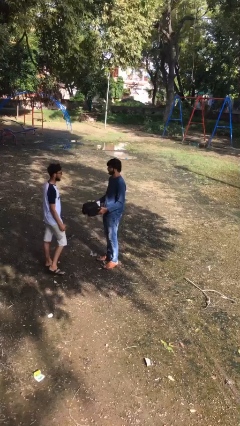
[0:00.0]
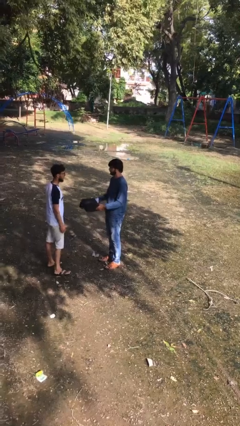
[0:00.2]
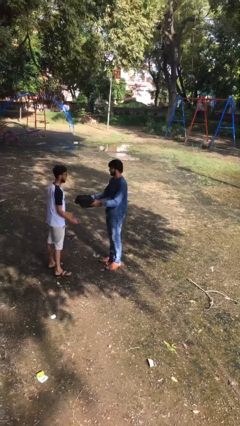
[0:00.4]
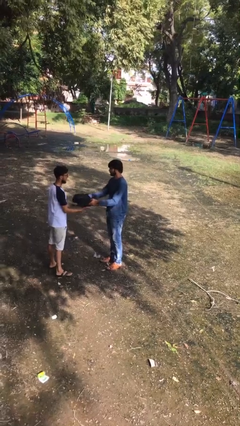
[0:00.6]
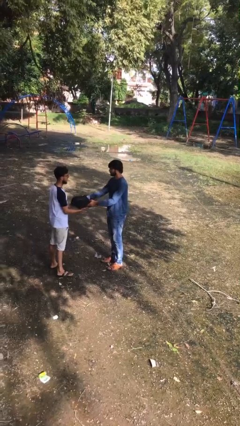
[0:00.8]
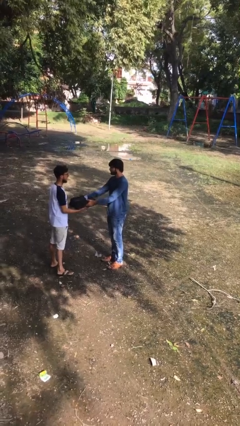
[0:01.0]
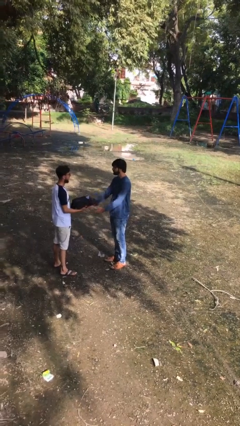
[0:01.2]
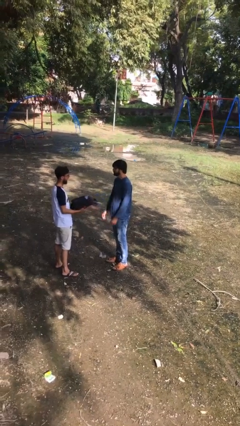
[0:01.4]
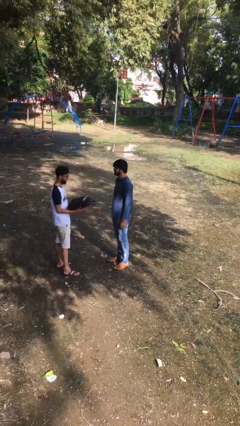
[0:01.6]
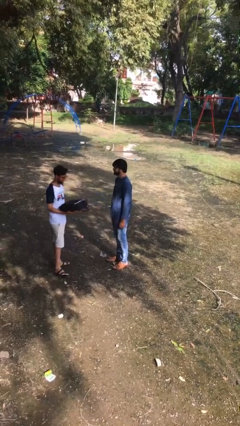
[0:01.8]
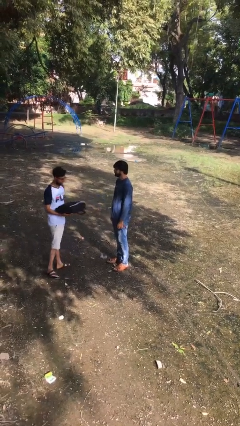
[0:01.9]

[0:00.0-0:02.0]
person transfers object to person

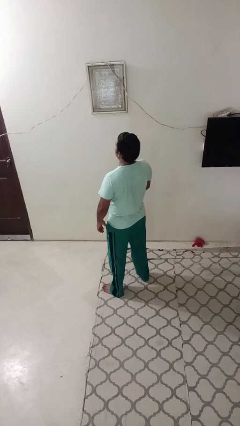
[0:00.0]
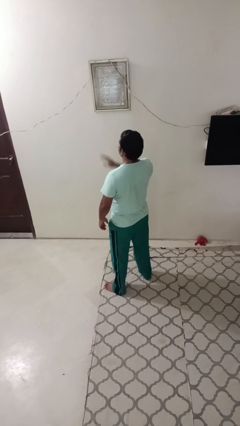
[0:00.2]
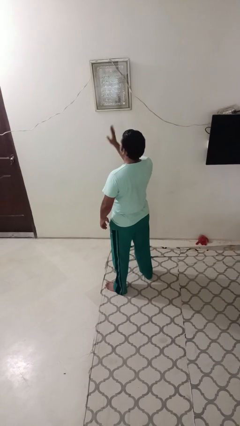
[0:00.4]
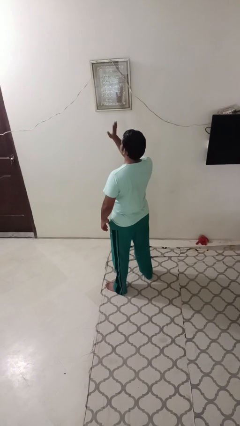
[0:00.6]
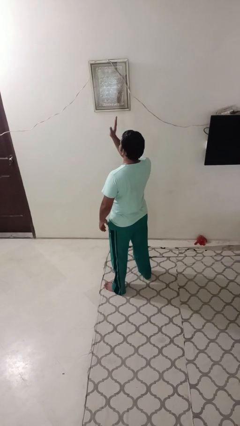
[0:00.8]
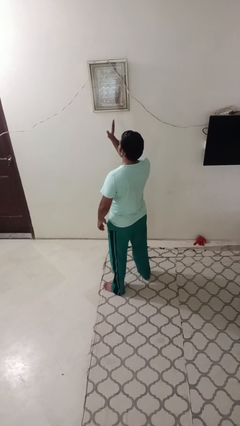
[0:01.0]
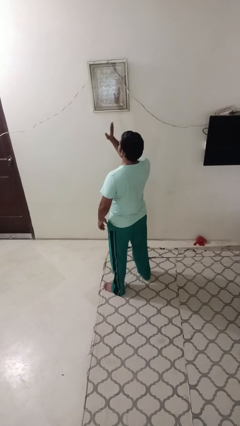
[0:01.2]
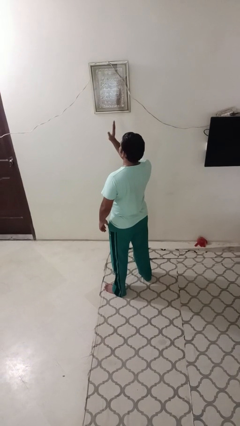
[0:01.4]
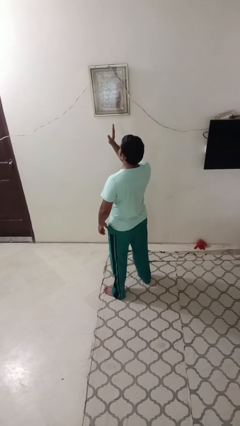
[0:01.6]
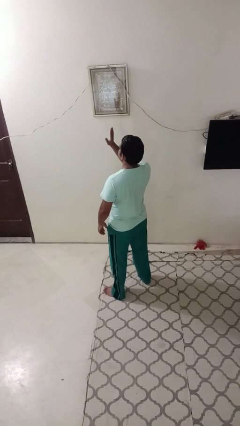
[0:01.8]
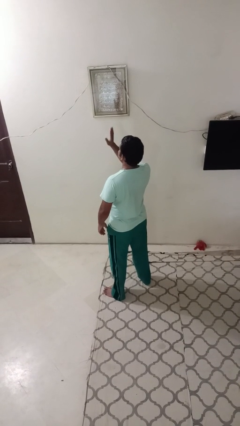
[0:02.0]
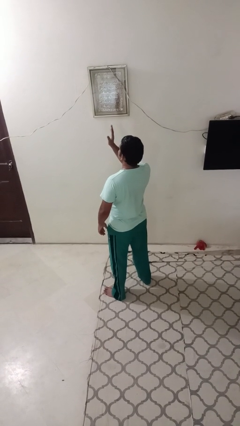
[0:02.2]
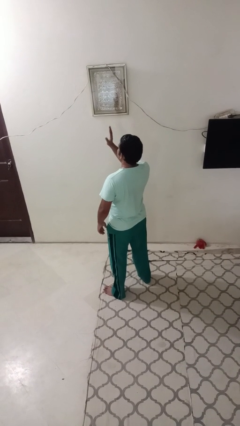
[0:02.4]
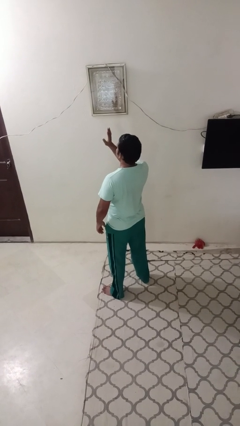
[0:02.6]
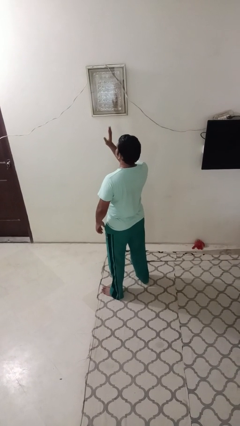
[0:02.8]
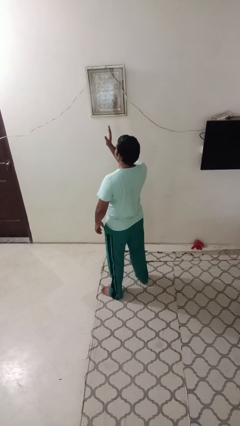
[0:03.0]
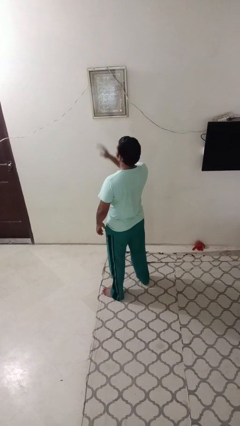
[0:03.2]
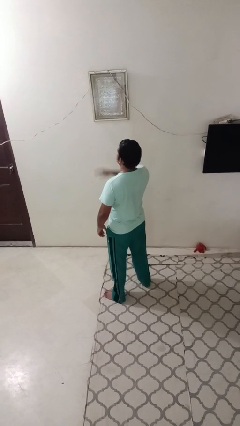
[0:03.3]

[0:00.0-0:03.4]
person waves at person

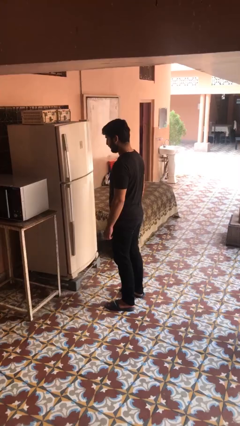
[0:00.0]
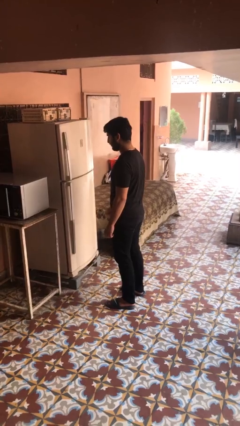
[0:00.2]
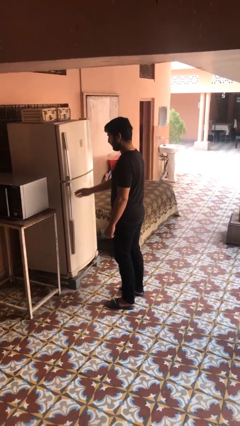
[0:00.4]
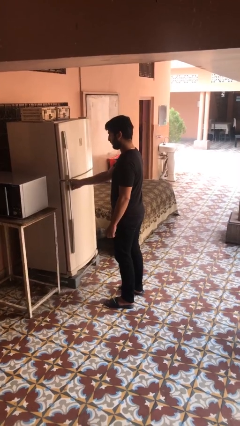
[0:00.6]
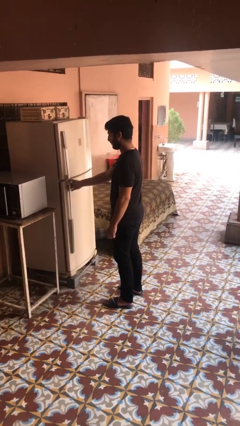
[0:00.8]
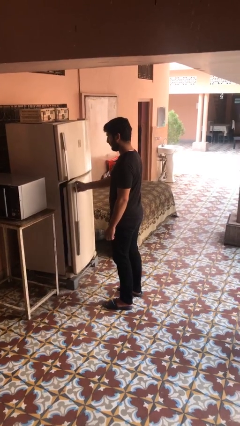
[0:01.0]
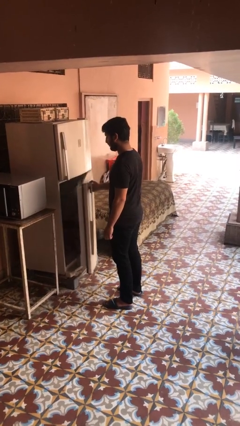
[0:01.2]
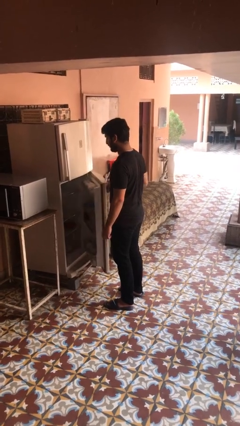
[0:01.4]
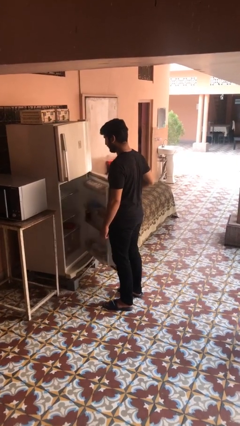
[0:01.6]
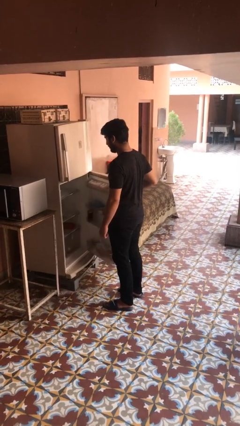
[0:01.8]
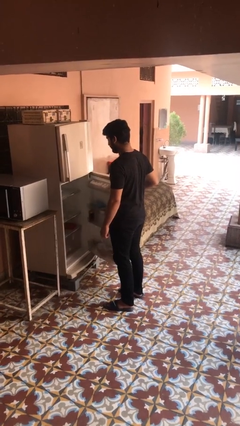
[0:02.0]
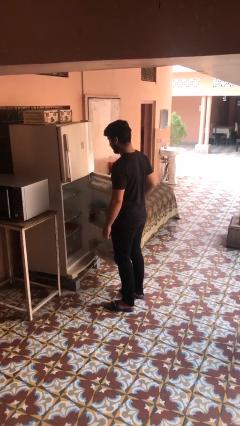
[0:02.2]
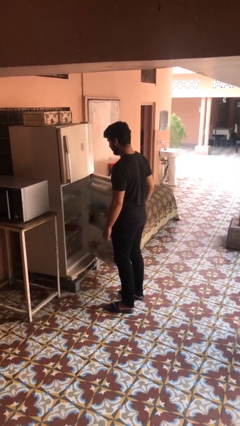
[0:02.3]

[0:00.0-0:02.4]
person opens refrigerator

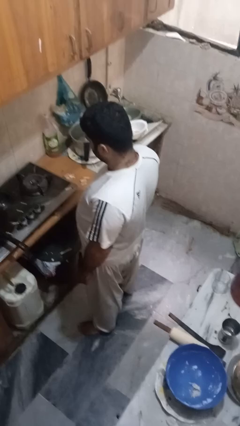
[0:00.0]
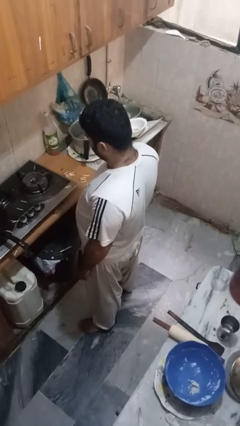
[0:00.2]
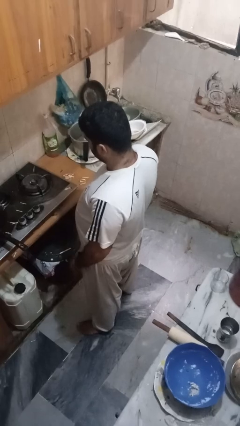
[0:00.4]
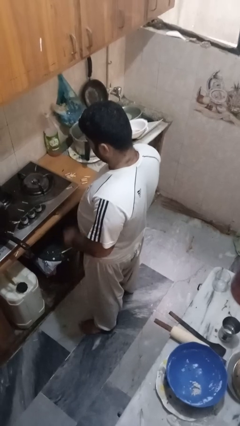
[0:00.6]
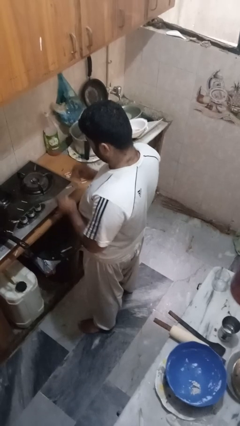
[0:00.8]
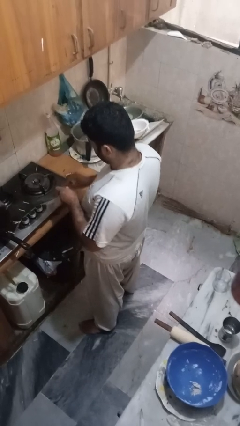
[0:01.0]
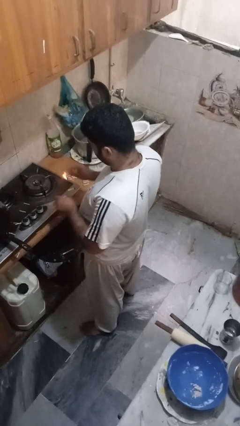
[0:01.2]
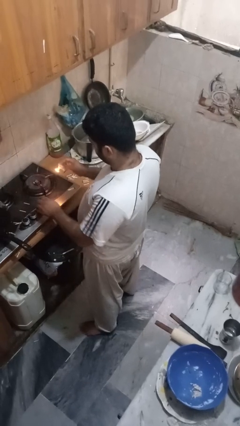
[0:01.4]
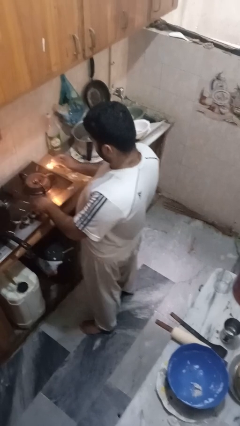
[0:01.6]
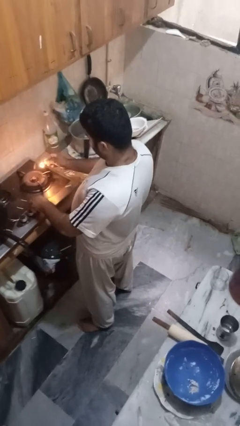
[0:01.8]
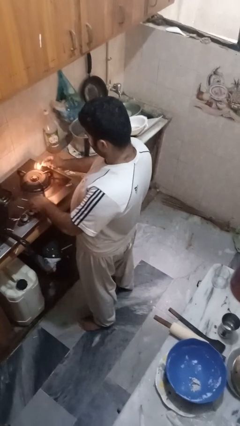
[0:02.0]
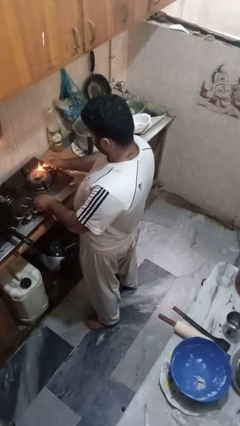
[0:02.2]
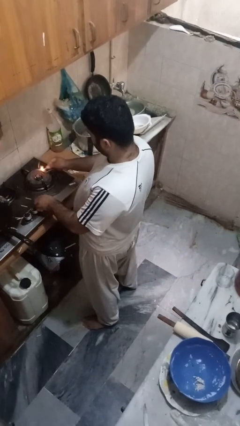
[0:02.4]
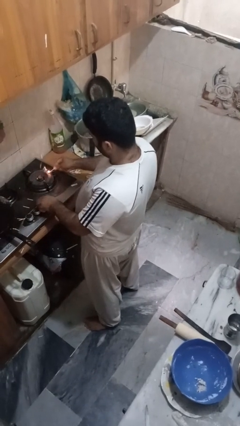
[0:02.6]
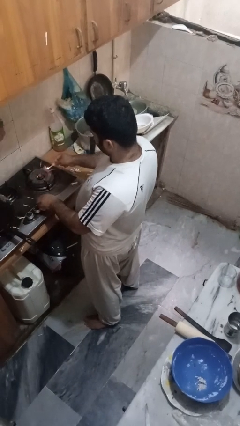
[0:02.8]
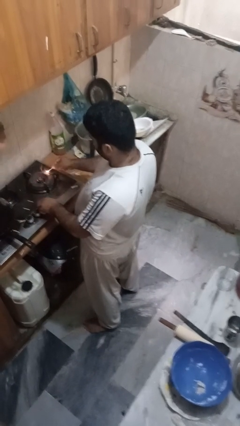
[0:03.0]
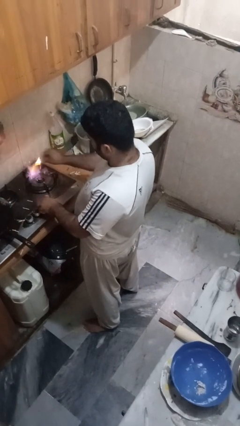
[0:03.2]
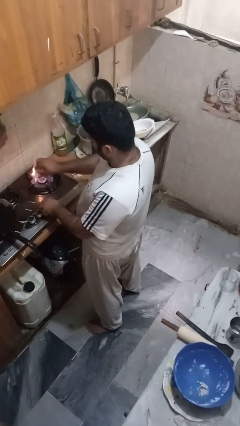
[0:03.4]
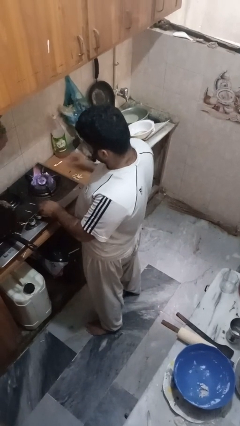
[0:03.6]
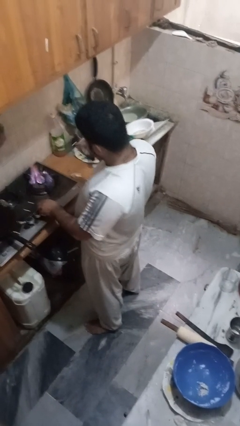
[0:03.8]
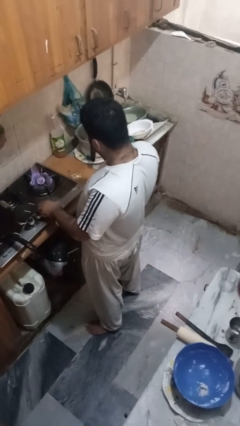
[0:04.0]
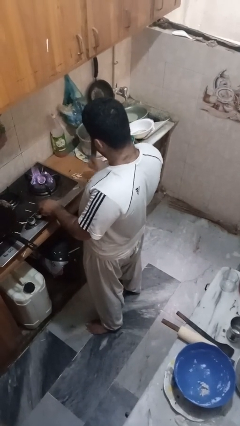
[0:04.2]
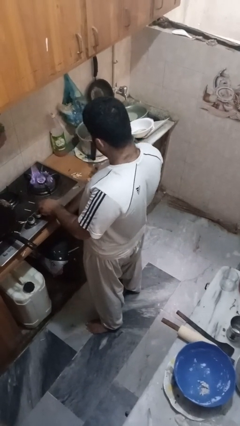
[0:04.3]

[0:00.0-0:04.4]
person turns on stovetop

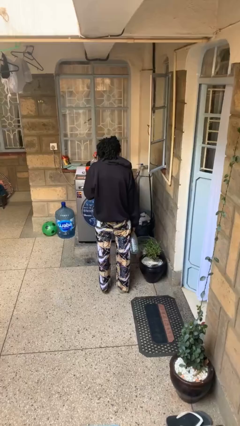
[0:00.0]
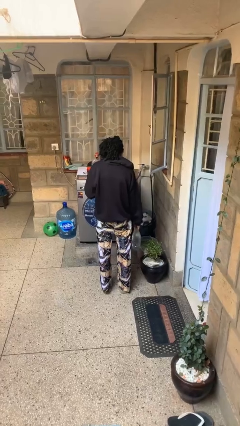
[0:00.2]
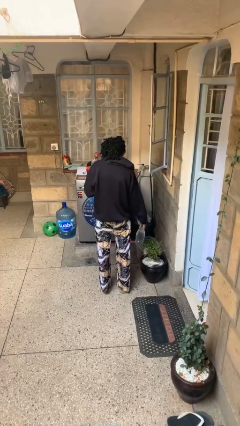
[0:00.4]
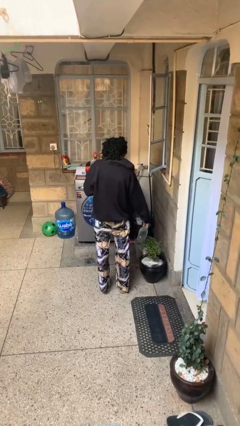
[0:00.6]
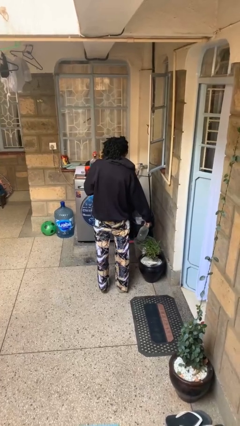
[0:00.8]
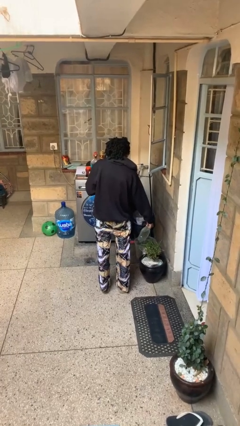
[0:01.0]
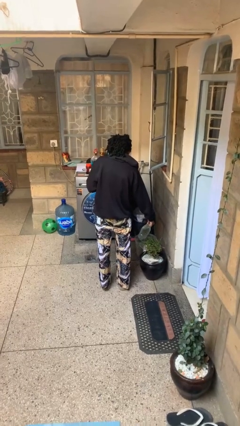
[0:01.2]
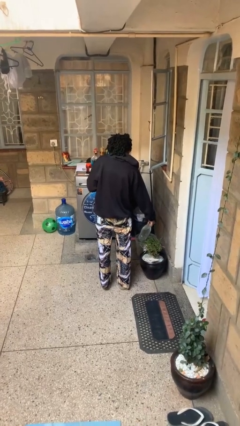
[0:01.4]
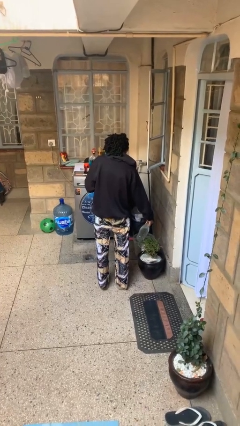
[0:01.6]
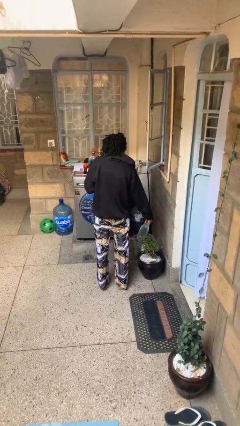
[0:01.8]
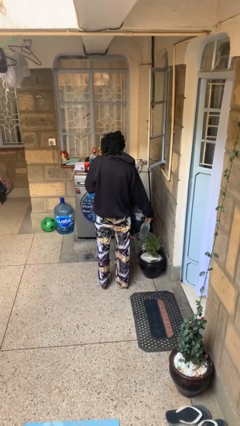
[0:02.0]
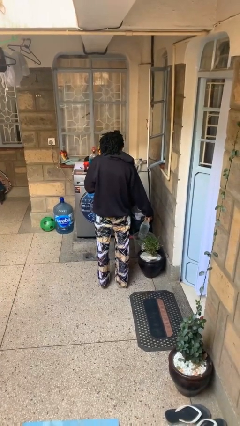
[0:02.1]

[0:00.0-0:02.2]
person waters houseplant

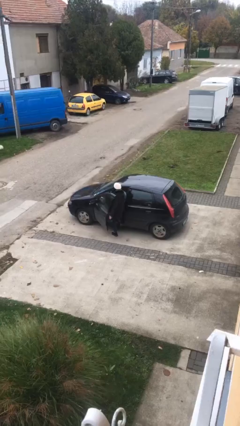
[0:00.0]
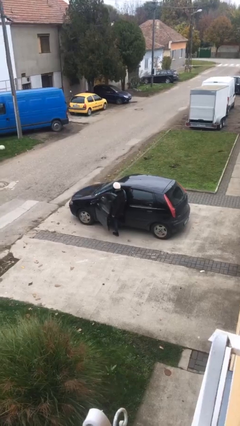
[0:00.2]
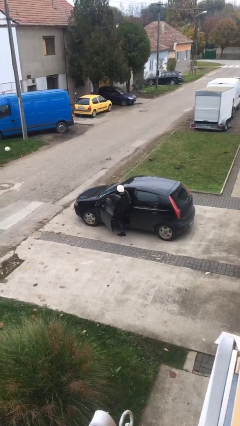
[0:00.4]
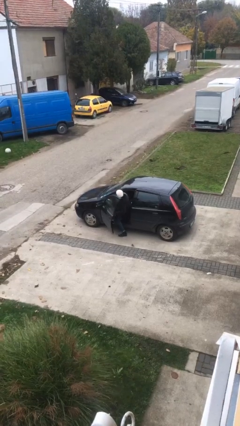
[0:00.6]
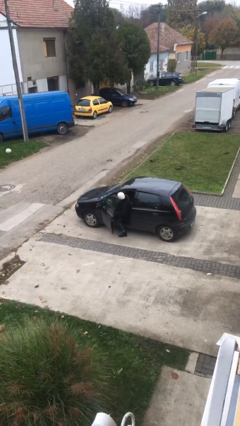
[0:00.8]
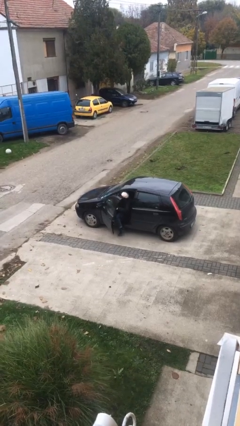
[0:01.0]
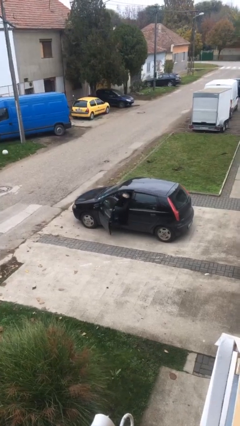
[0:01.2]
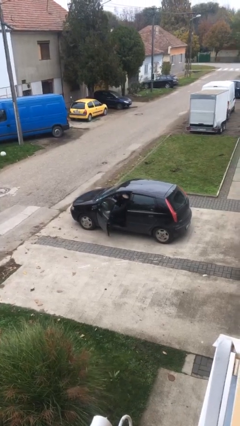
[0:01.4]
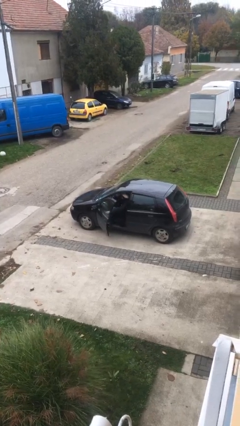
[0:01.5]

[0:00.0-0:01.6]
person enters car

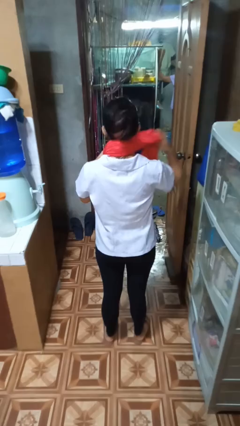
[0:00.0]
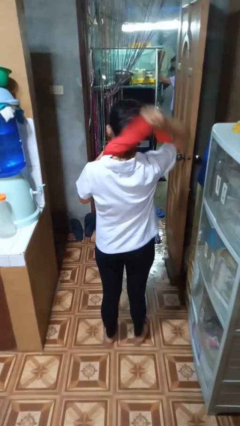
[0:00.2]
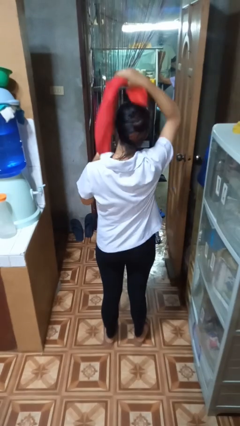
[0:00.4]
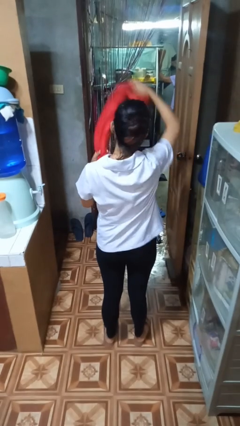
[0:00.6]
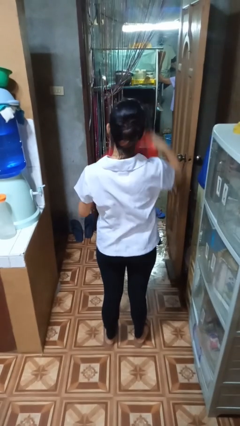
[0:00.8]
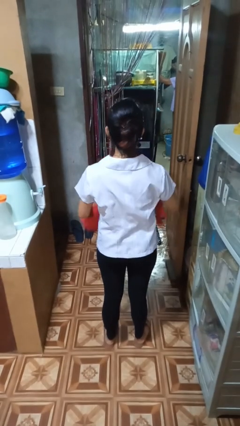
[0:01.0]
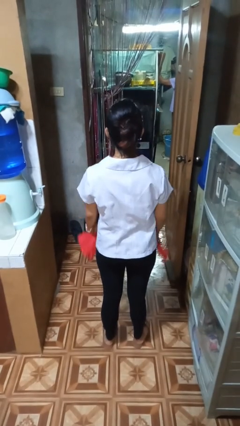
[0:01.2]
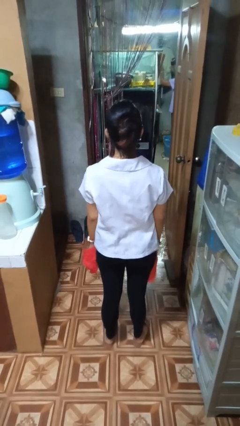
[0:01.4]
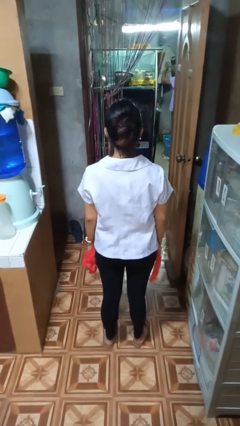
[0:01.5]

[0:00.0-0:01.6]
person takes off scarf
